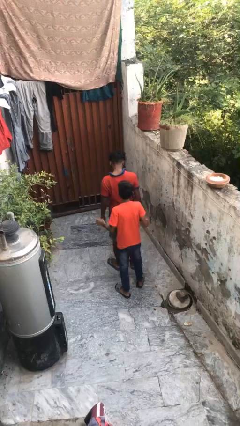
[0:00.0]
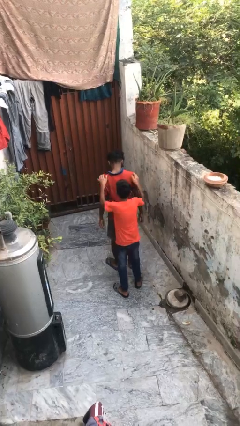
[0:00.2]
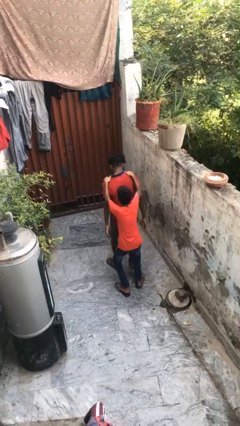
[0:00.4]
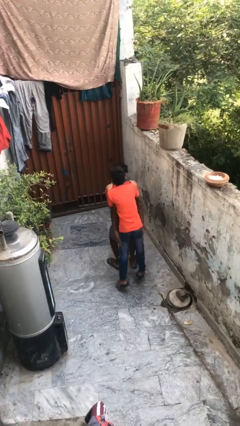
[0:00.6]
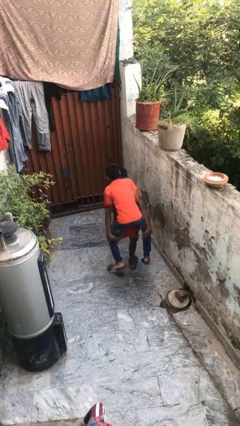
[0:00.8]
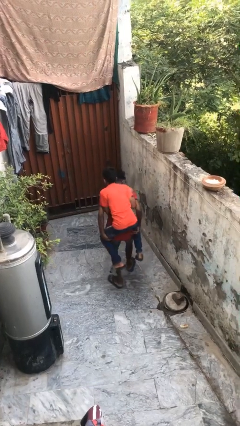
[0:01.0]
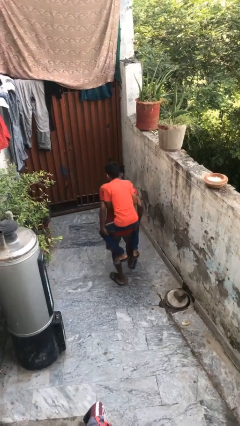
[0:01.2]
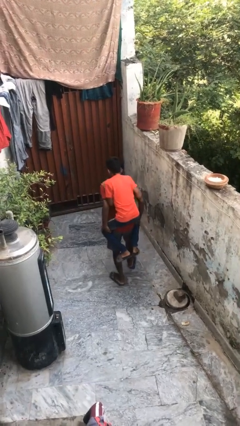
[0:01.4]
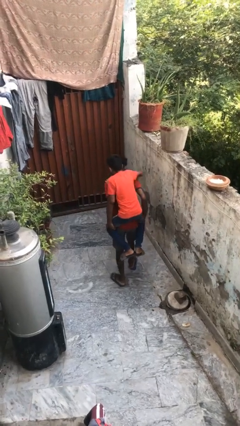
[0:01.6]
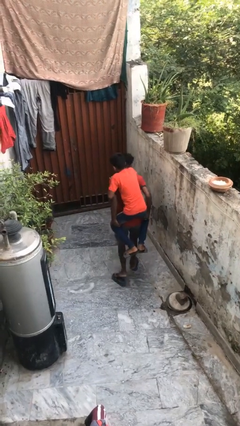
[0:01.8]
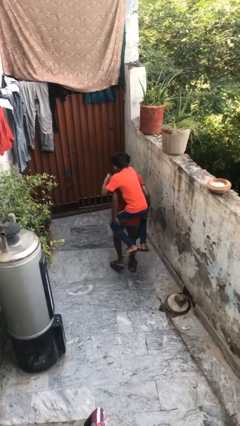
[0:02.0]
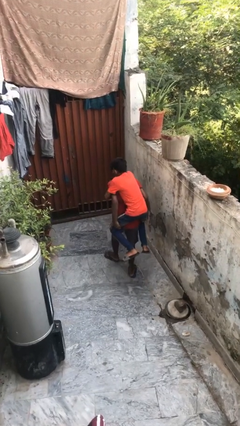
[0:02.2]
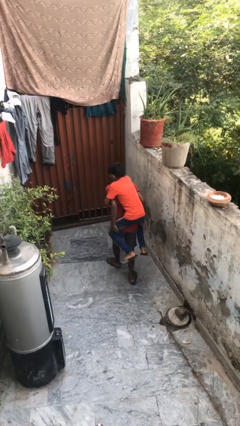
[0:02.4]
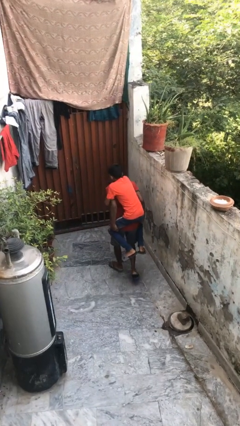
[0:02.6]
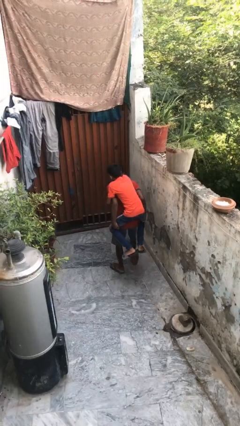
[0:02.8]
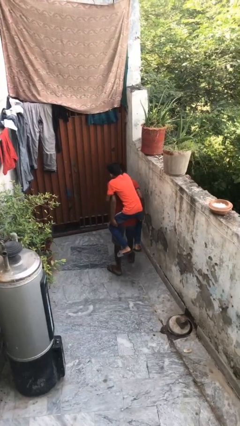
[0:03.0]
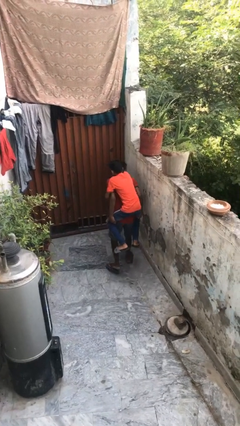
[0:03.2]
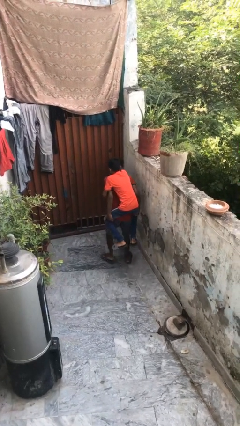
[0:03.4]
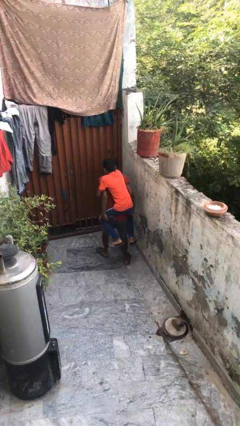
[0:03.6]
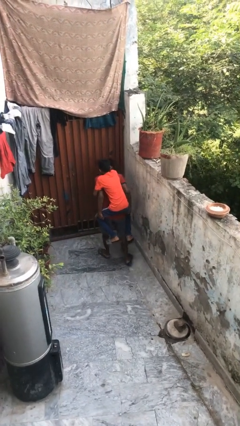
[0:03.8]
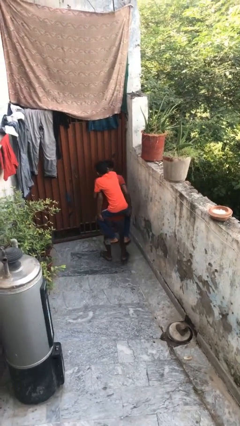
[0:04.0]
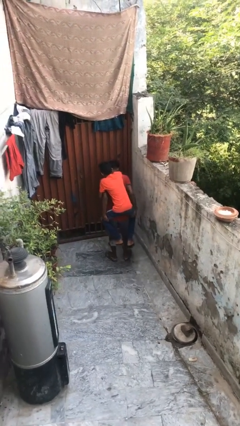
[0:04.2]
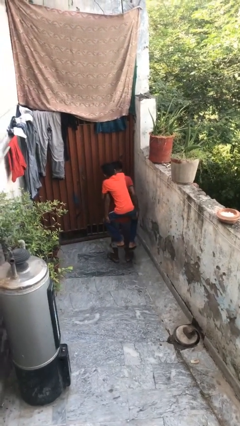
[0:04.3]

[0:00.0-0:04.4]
person carries person on back

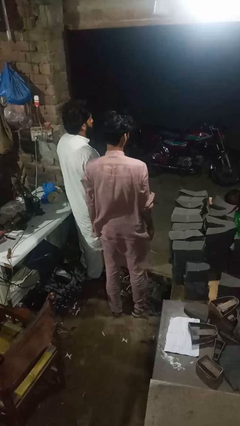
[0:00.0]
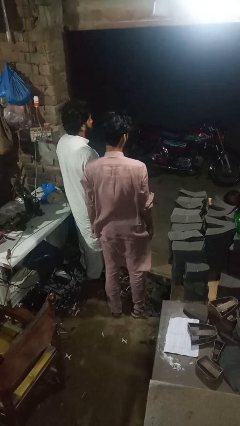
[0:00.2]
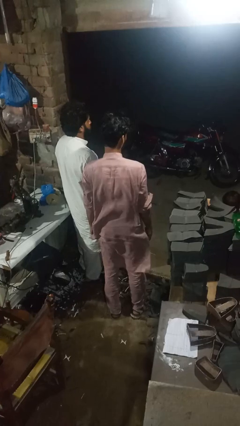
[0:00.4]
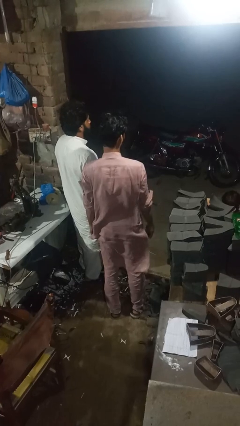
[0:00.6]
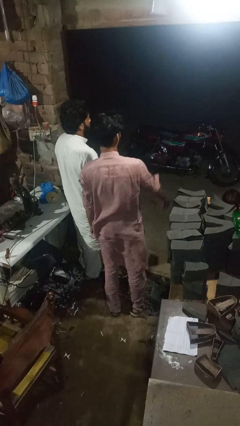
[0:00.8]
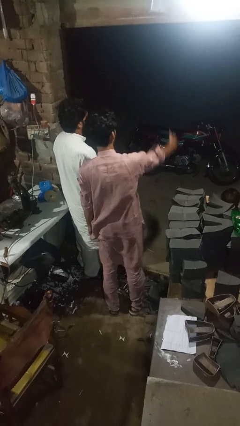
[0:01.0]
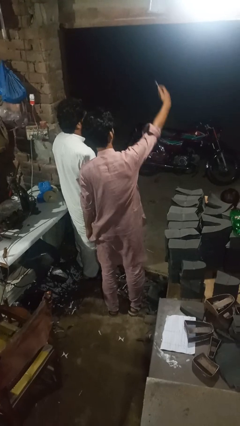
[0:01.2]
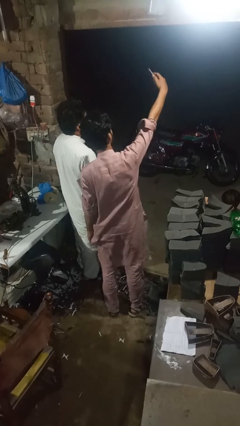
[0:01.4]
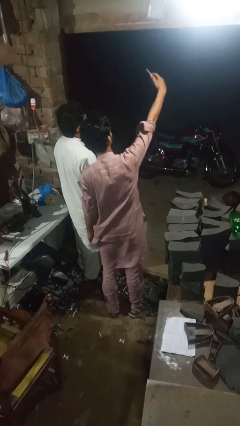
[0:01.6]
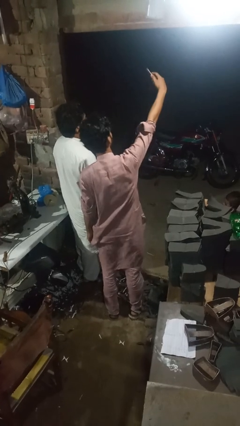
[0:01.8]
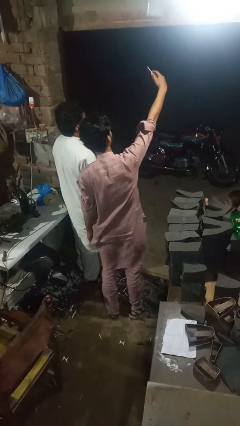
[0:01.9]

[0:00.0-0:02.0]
person takes selfie with person

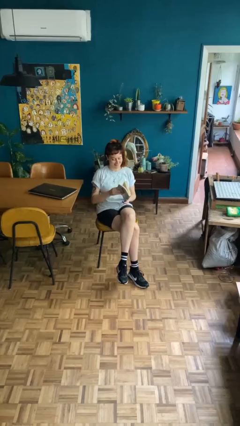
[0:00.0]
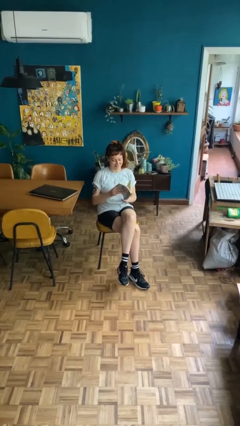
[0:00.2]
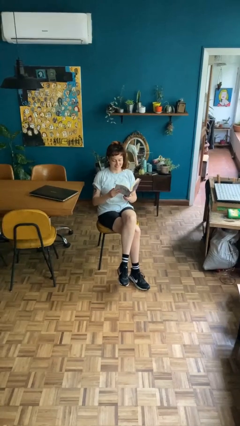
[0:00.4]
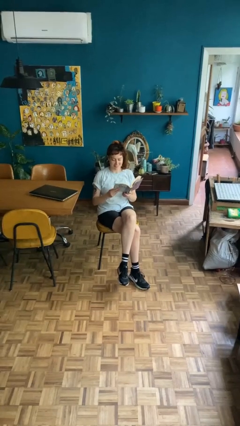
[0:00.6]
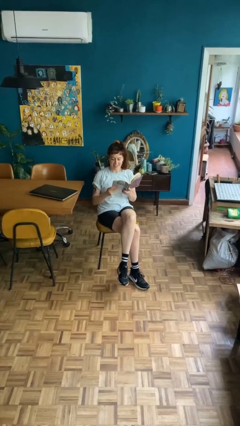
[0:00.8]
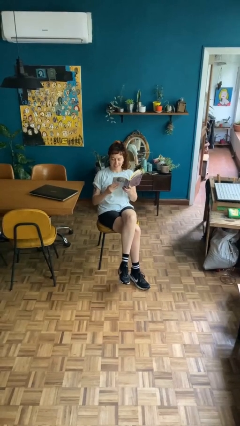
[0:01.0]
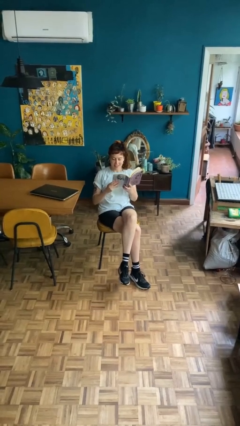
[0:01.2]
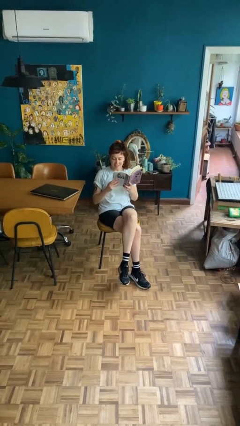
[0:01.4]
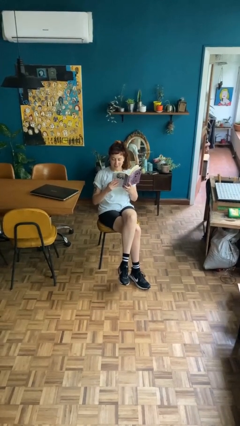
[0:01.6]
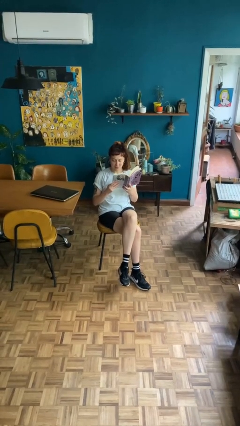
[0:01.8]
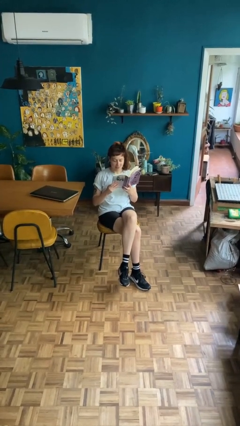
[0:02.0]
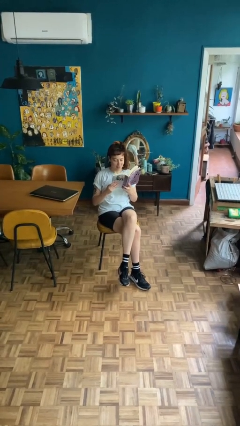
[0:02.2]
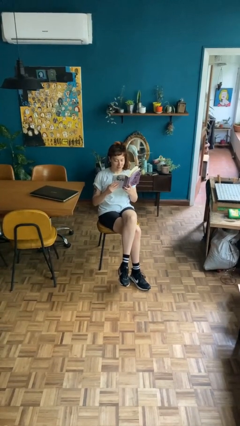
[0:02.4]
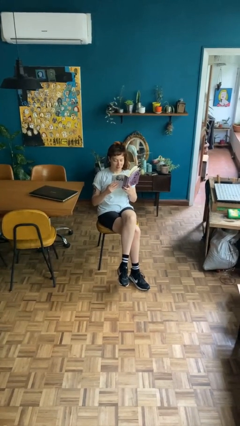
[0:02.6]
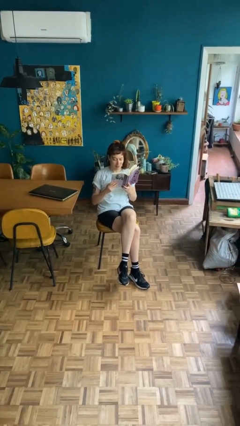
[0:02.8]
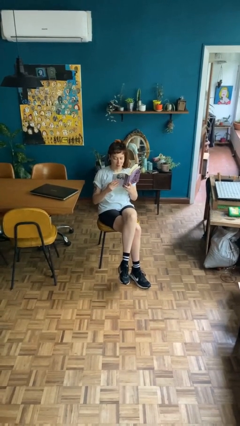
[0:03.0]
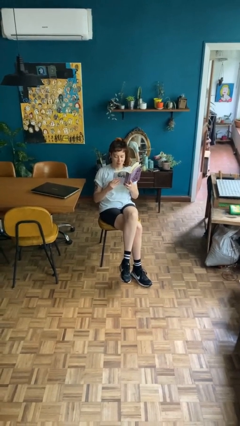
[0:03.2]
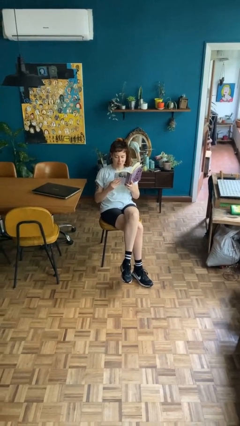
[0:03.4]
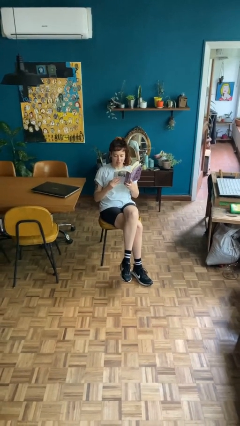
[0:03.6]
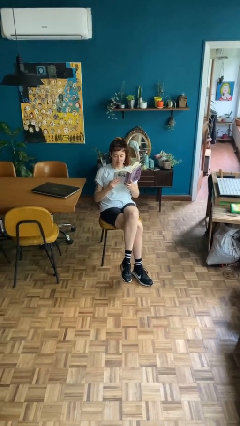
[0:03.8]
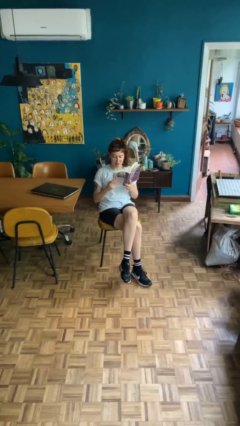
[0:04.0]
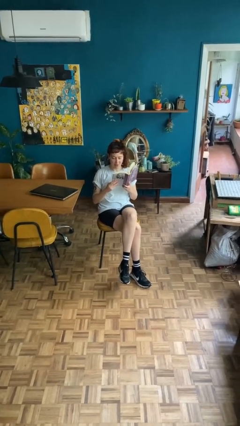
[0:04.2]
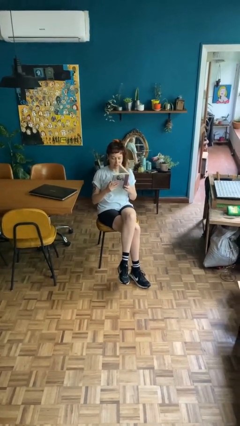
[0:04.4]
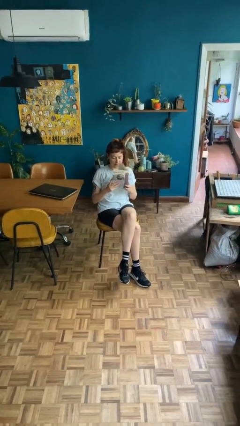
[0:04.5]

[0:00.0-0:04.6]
person reads document

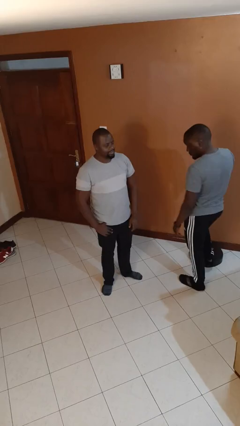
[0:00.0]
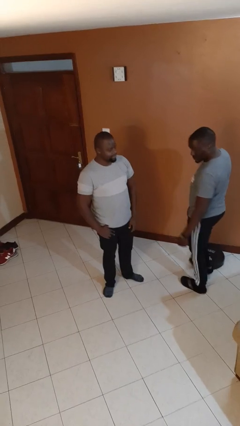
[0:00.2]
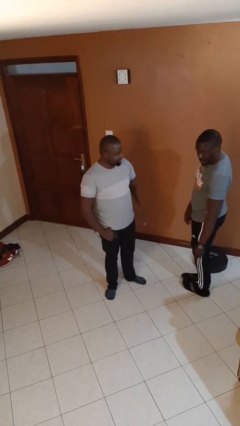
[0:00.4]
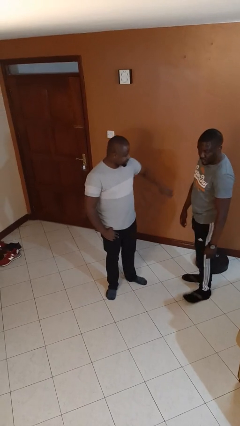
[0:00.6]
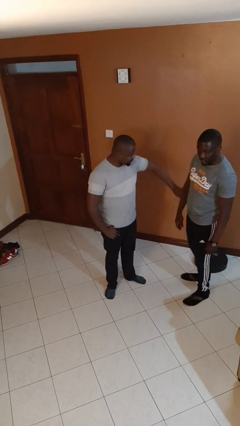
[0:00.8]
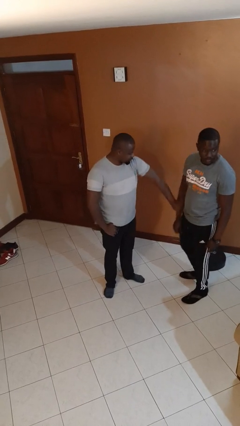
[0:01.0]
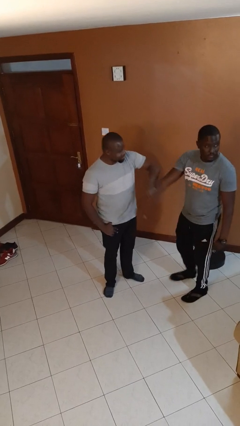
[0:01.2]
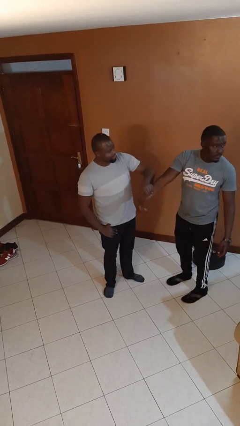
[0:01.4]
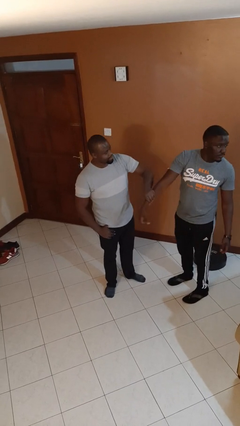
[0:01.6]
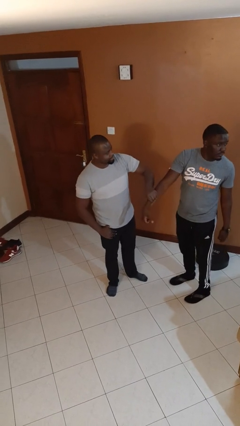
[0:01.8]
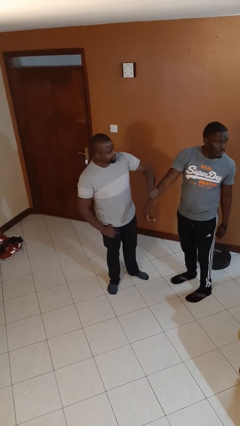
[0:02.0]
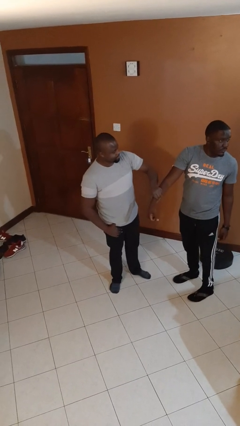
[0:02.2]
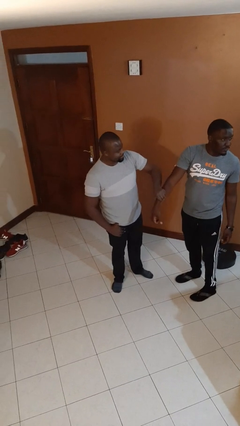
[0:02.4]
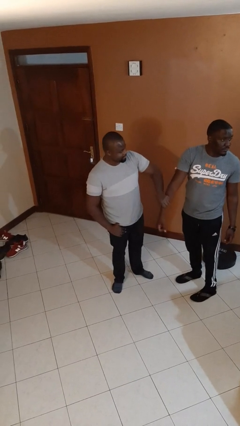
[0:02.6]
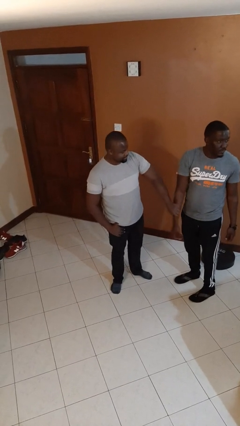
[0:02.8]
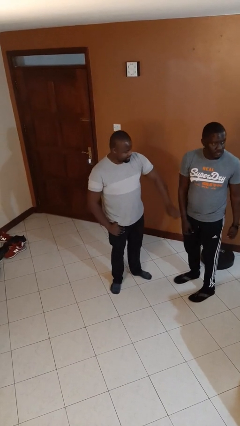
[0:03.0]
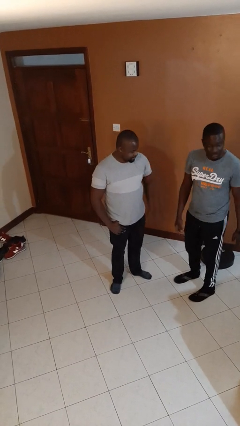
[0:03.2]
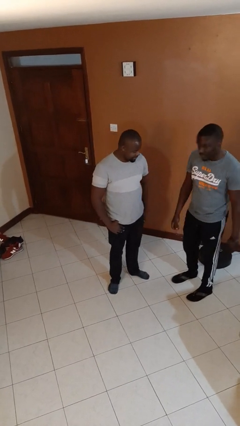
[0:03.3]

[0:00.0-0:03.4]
person grabs person by forearm

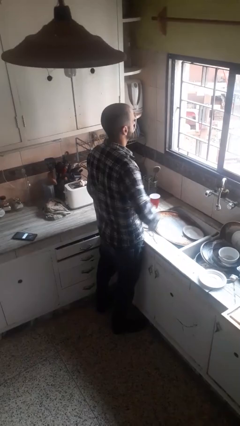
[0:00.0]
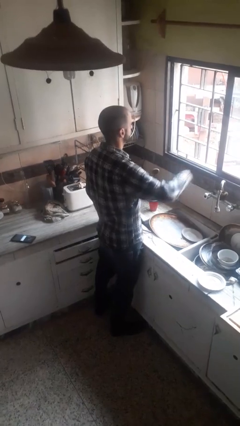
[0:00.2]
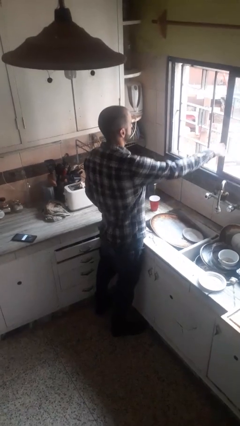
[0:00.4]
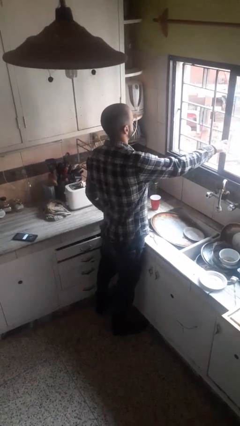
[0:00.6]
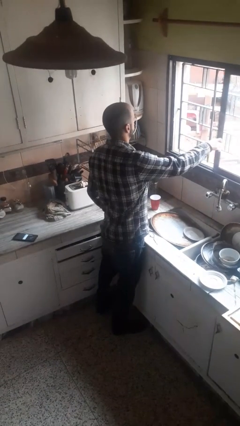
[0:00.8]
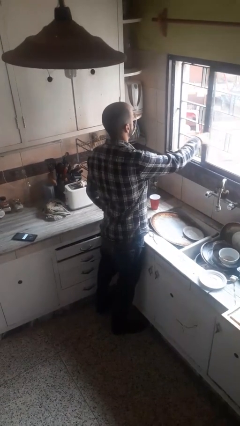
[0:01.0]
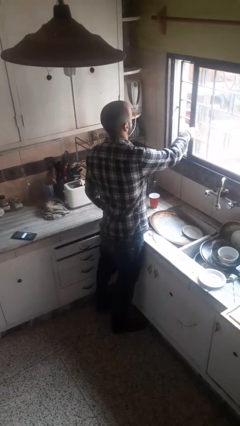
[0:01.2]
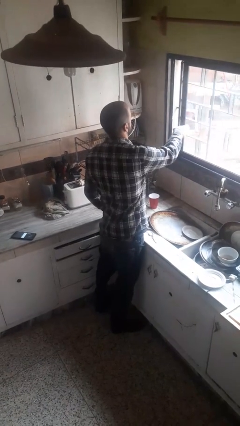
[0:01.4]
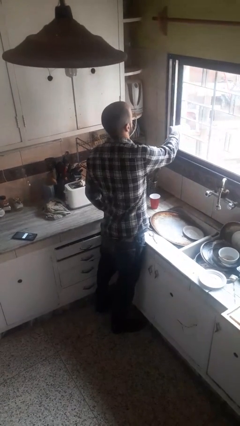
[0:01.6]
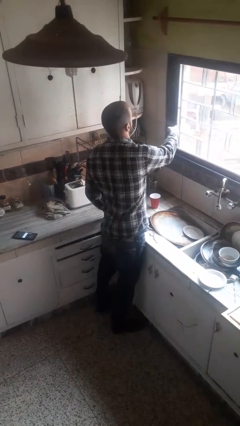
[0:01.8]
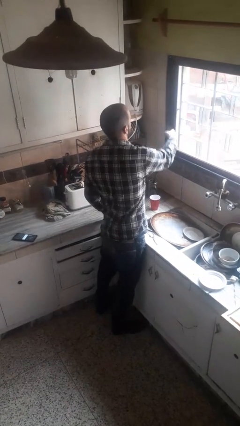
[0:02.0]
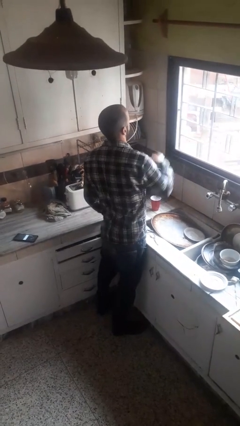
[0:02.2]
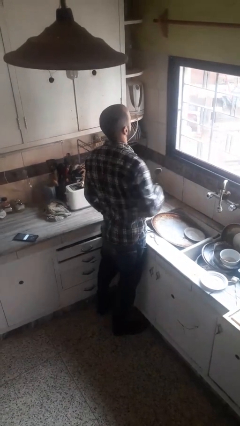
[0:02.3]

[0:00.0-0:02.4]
person closes home window

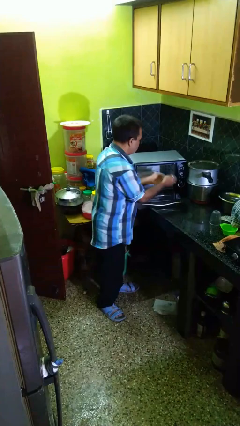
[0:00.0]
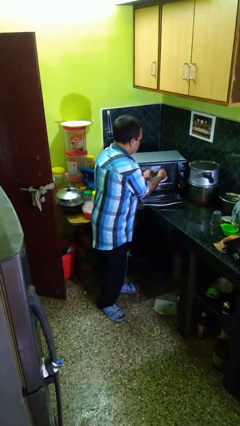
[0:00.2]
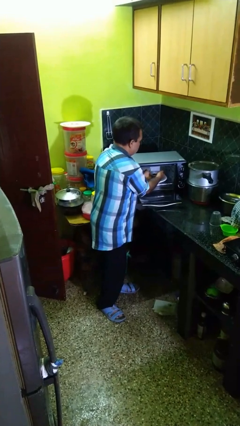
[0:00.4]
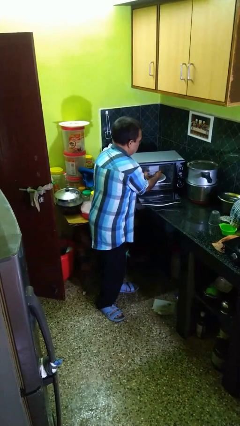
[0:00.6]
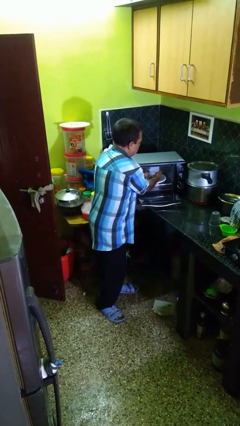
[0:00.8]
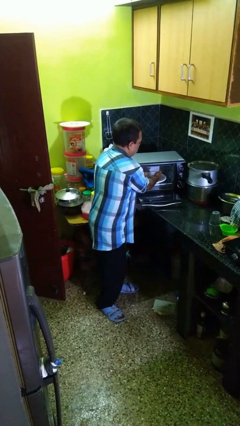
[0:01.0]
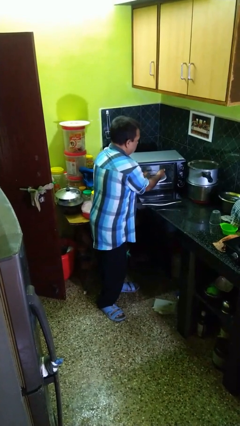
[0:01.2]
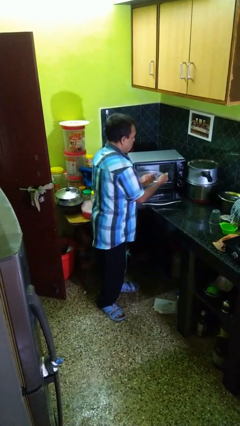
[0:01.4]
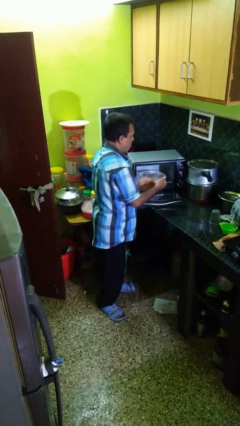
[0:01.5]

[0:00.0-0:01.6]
person puts object into microwave
